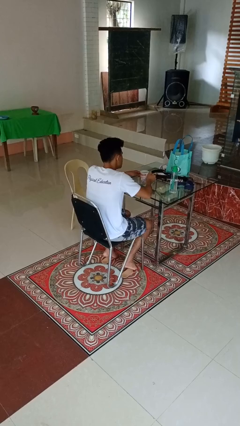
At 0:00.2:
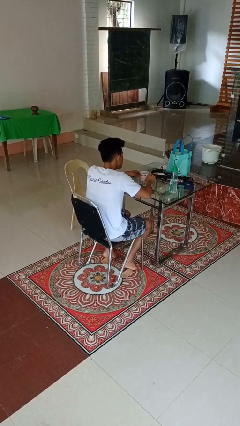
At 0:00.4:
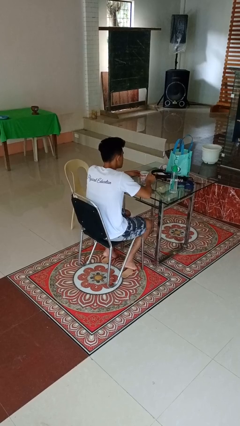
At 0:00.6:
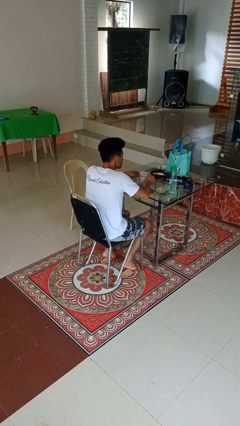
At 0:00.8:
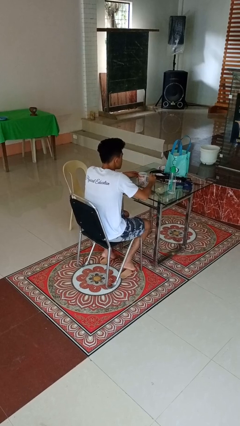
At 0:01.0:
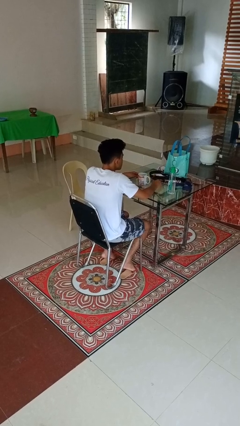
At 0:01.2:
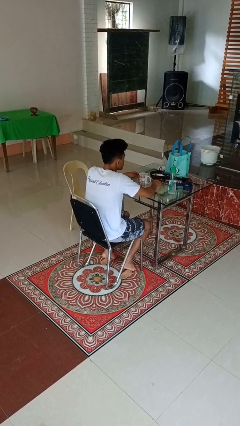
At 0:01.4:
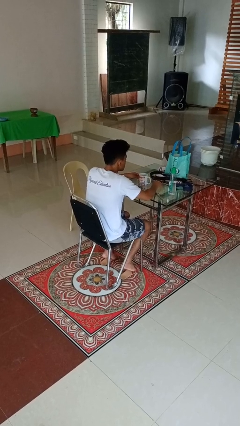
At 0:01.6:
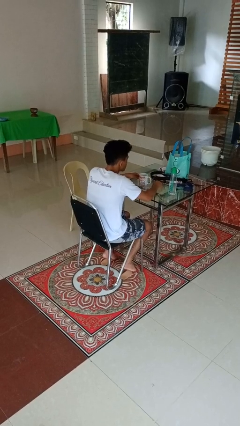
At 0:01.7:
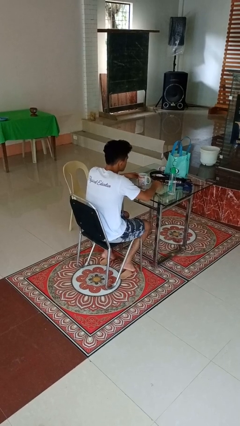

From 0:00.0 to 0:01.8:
person puts down object on table

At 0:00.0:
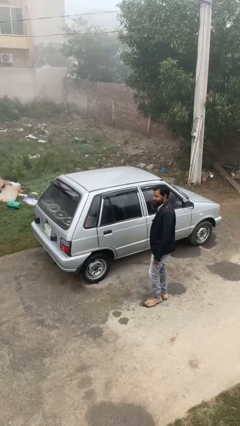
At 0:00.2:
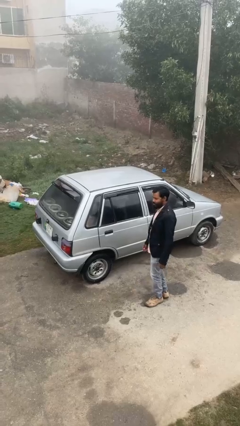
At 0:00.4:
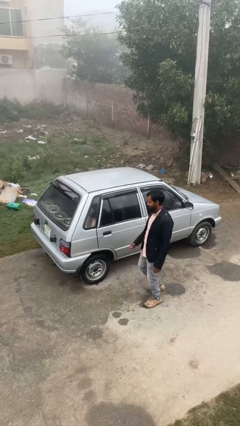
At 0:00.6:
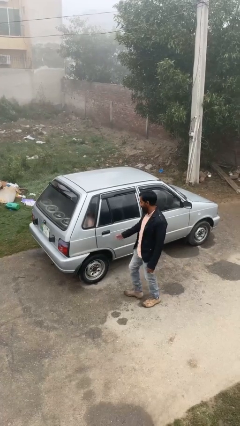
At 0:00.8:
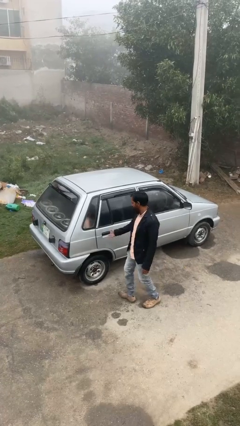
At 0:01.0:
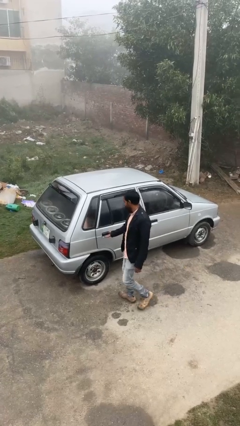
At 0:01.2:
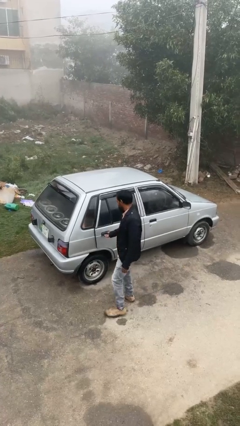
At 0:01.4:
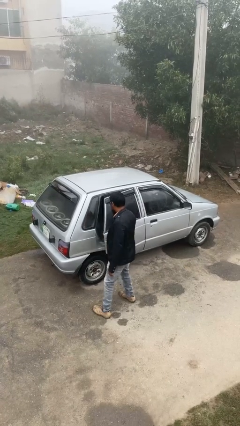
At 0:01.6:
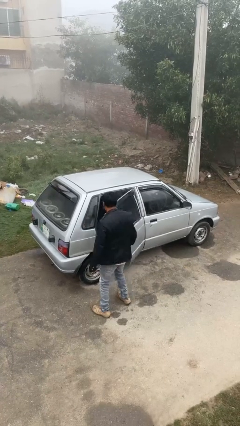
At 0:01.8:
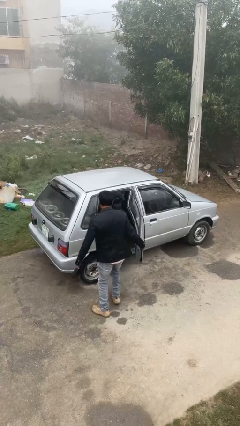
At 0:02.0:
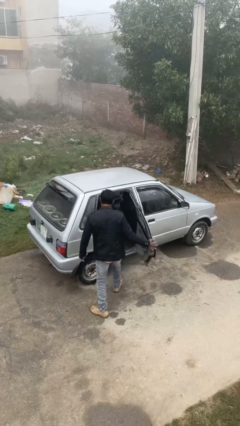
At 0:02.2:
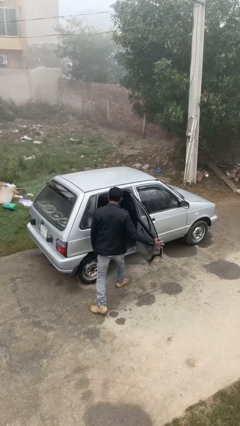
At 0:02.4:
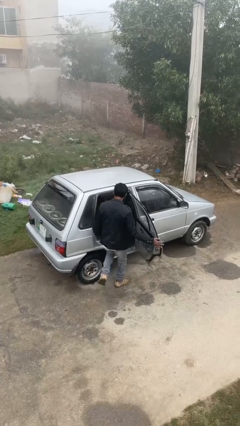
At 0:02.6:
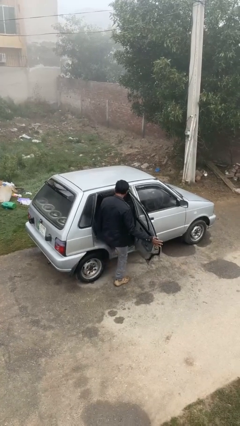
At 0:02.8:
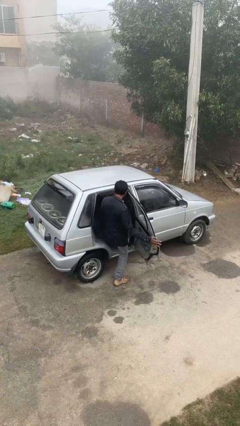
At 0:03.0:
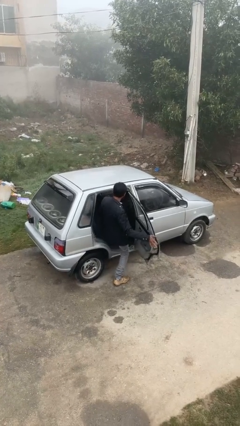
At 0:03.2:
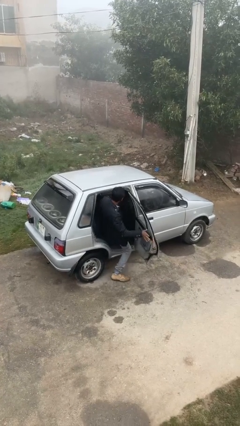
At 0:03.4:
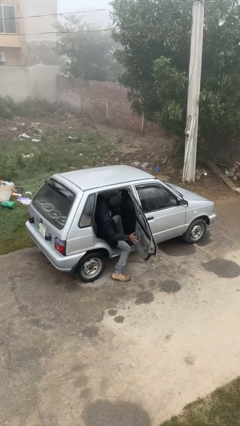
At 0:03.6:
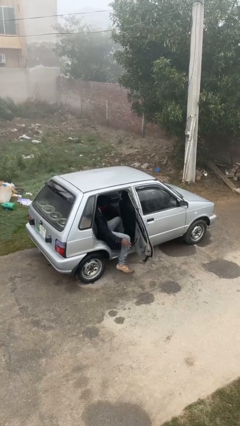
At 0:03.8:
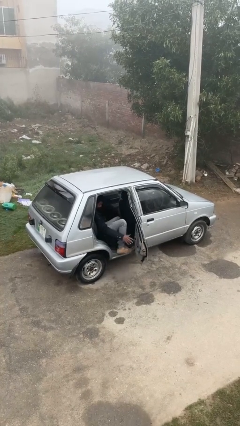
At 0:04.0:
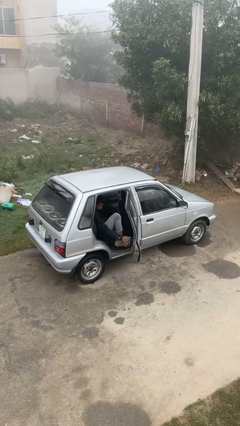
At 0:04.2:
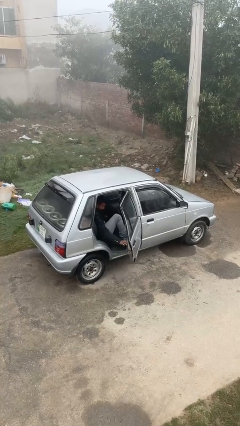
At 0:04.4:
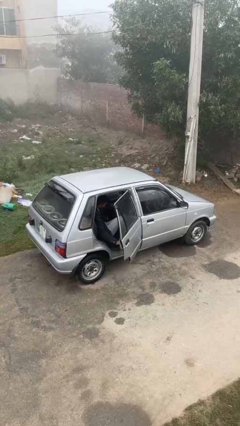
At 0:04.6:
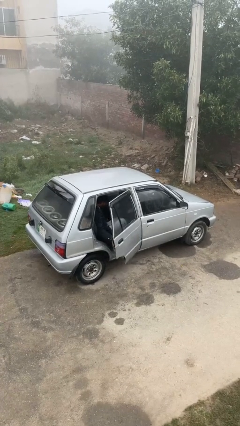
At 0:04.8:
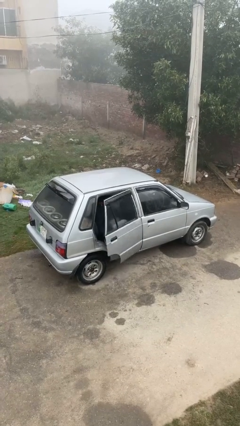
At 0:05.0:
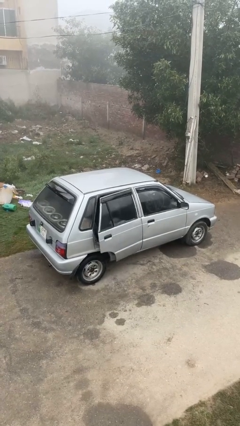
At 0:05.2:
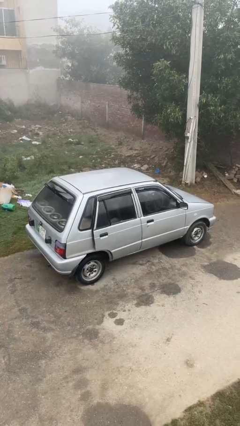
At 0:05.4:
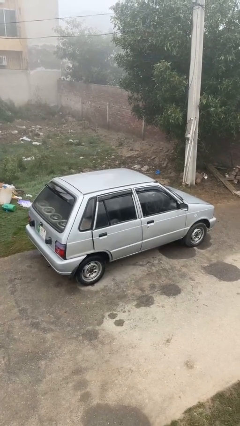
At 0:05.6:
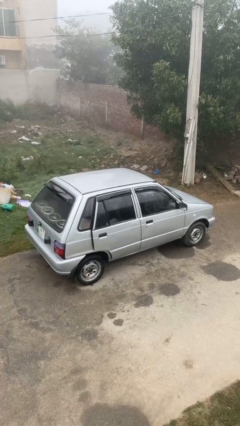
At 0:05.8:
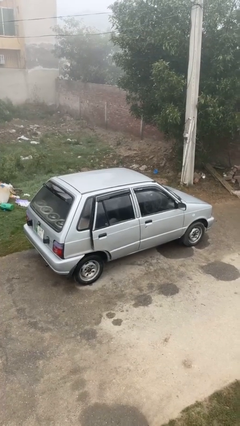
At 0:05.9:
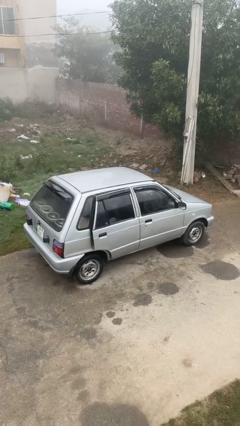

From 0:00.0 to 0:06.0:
car picks up person

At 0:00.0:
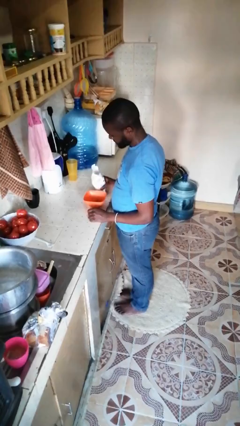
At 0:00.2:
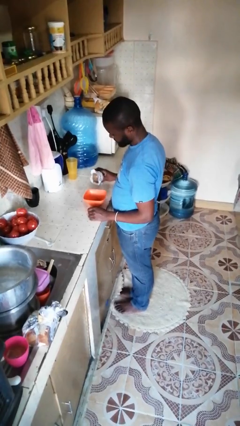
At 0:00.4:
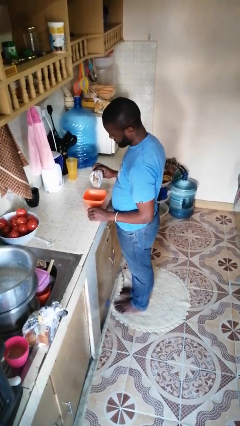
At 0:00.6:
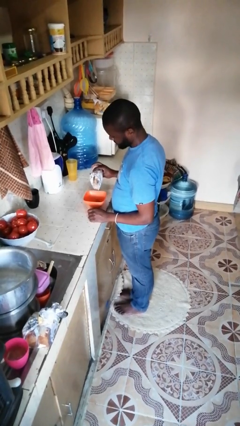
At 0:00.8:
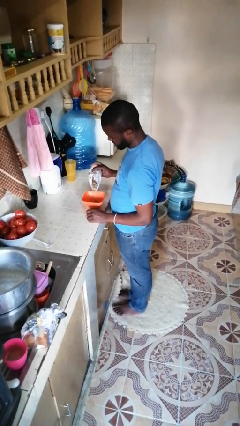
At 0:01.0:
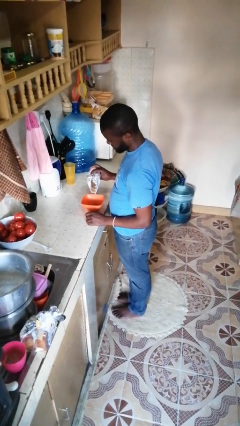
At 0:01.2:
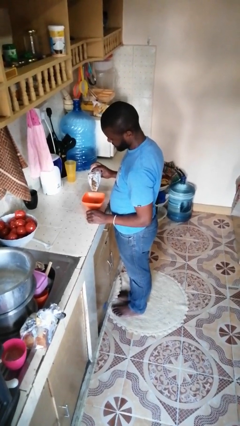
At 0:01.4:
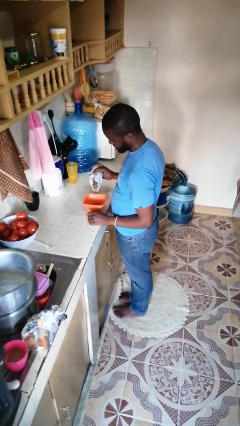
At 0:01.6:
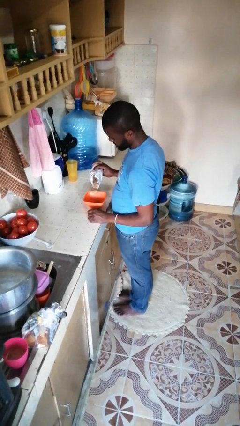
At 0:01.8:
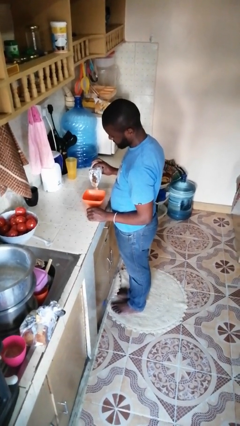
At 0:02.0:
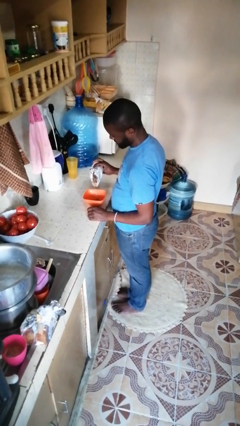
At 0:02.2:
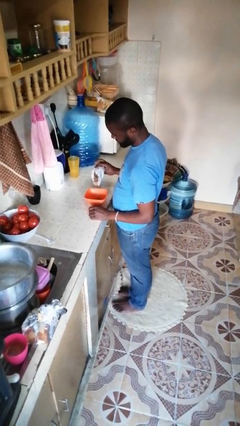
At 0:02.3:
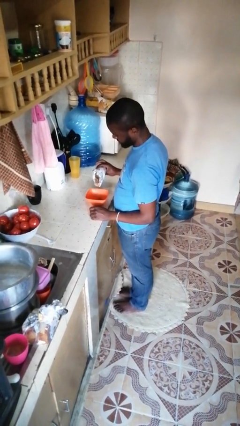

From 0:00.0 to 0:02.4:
person pours into bowl
